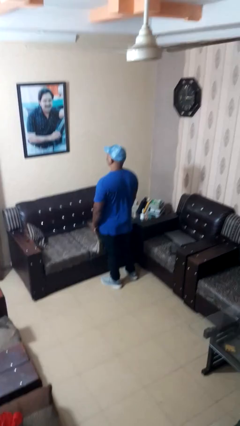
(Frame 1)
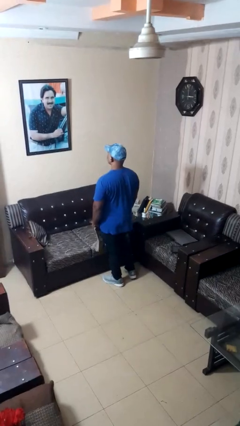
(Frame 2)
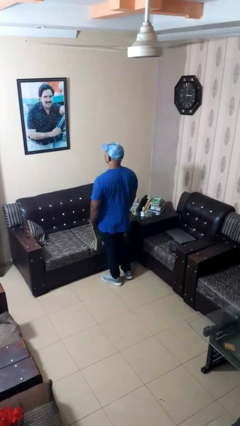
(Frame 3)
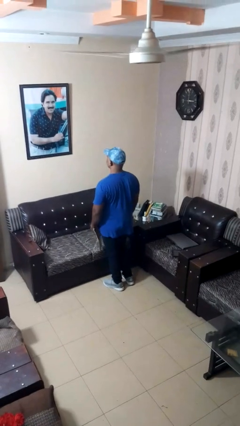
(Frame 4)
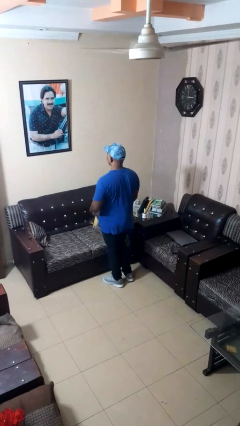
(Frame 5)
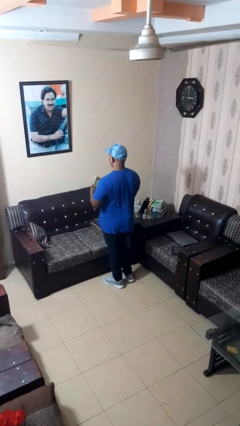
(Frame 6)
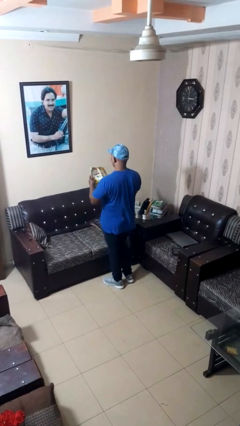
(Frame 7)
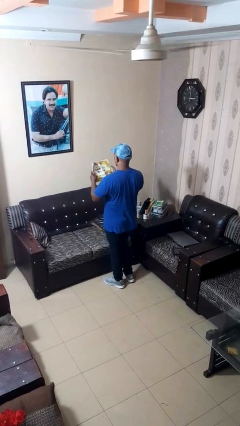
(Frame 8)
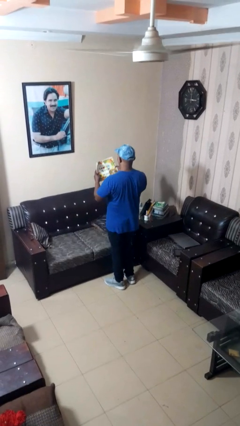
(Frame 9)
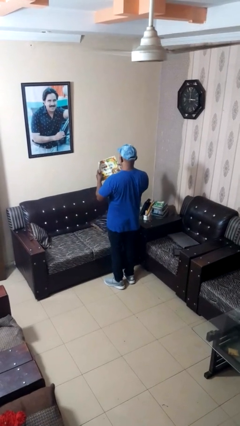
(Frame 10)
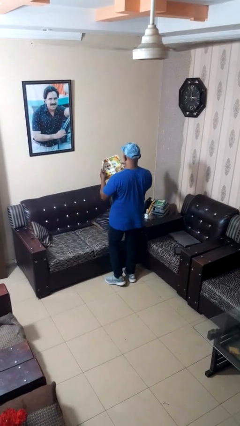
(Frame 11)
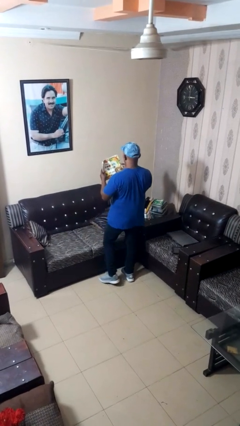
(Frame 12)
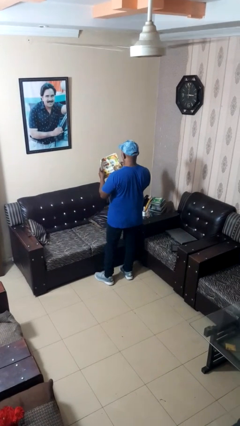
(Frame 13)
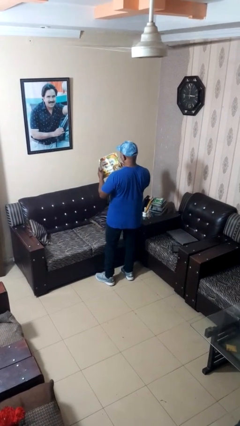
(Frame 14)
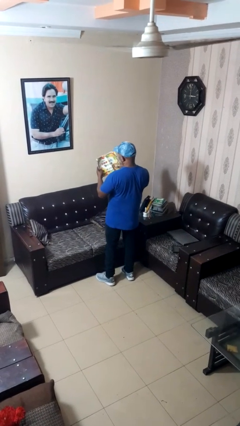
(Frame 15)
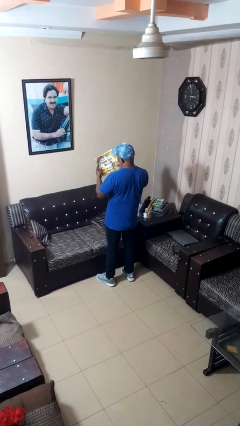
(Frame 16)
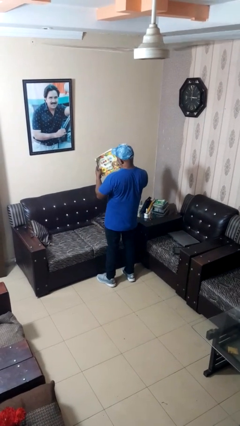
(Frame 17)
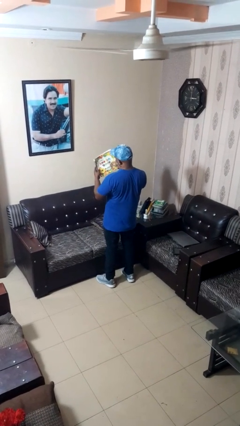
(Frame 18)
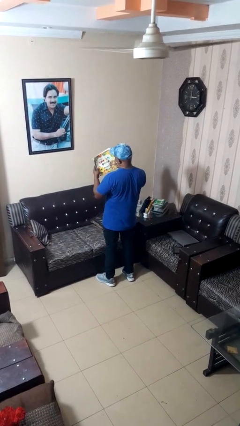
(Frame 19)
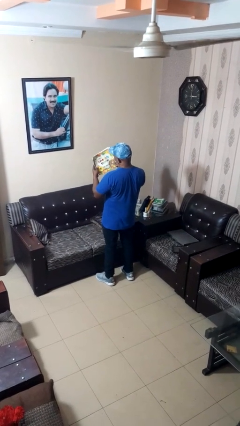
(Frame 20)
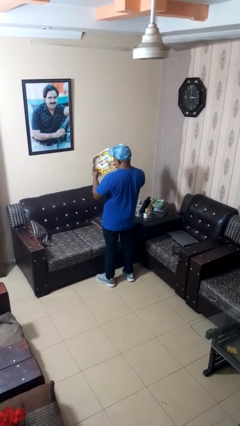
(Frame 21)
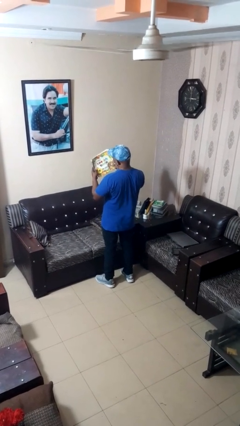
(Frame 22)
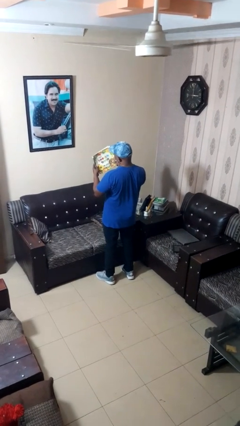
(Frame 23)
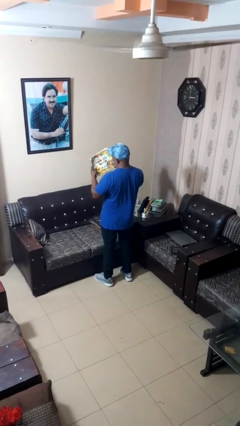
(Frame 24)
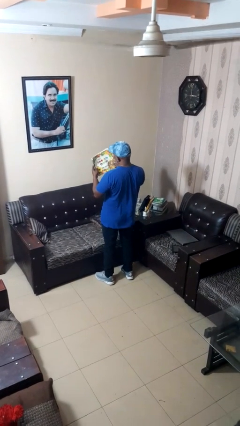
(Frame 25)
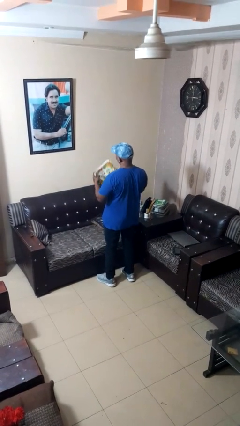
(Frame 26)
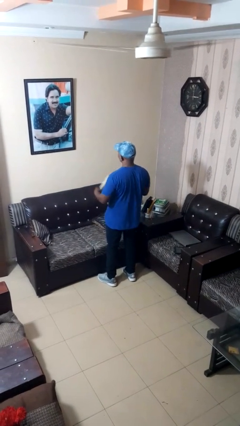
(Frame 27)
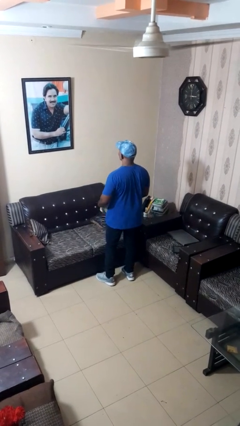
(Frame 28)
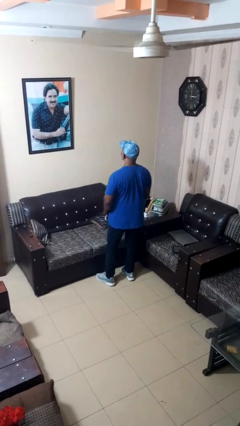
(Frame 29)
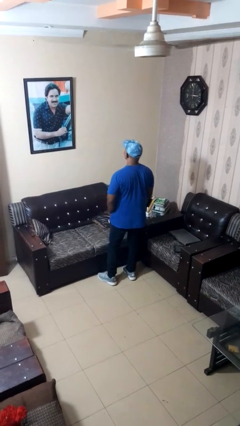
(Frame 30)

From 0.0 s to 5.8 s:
person reads magazine

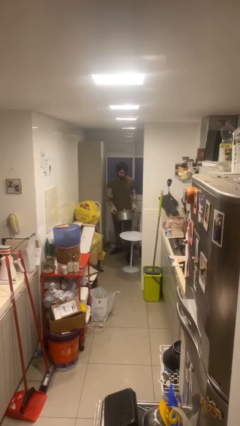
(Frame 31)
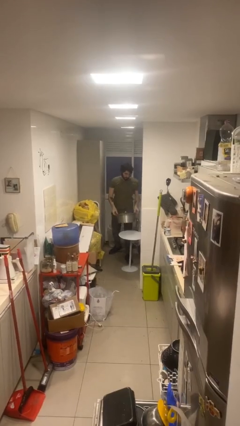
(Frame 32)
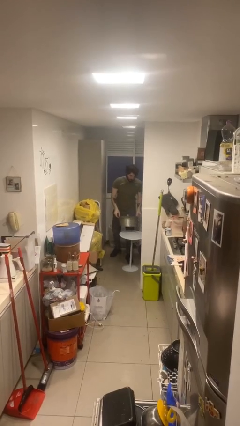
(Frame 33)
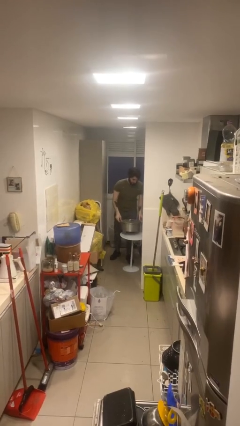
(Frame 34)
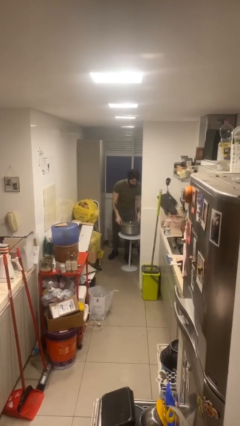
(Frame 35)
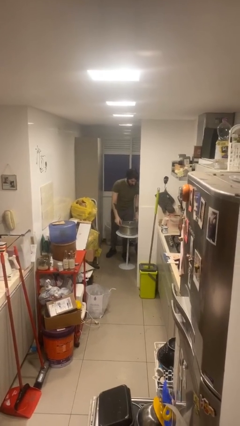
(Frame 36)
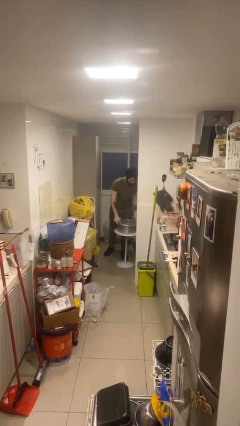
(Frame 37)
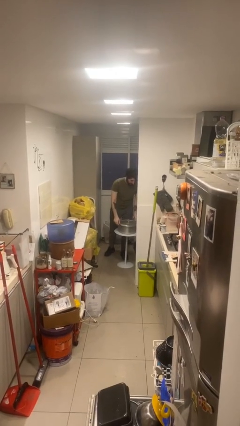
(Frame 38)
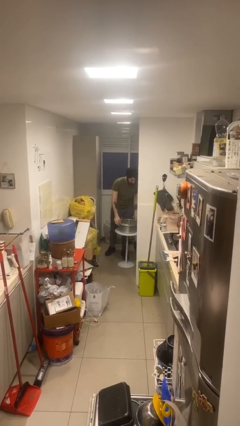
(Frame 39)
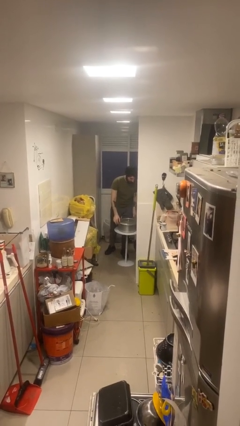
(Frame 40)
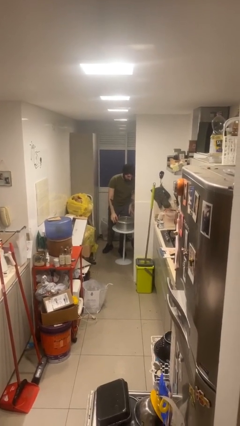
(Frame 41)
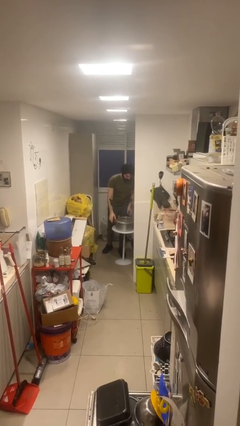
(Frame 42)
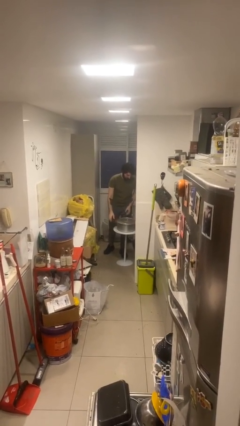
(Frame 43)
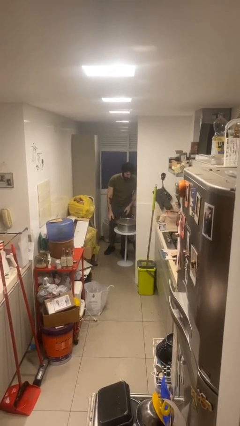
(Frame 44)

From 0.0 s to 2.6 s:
person puts down object on table

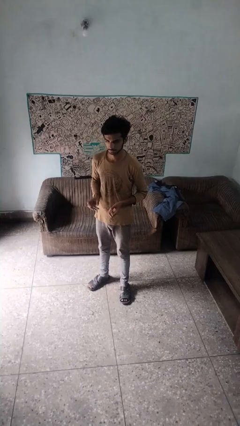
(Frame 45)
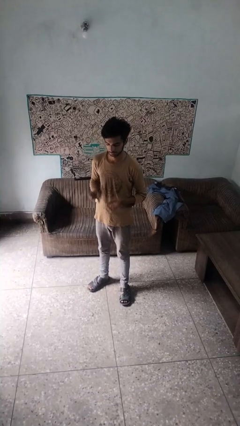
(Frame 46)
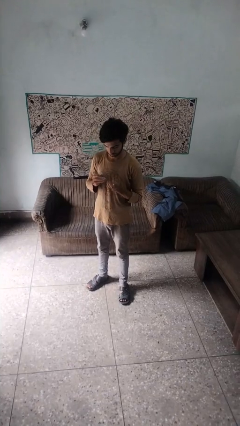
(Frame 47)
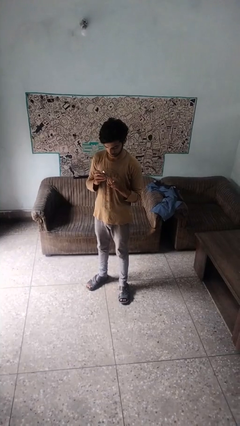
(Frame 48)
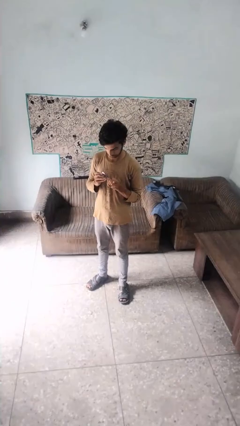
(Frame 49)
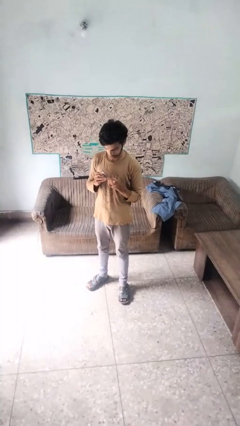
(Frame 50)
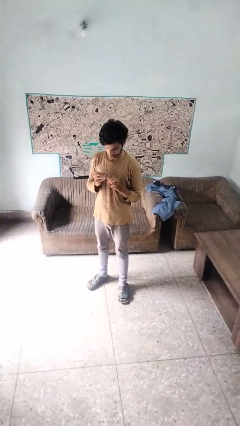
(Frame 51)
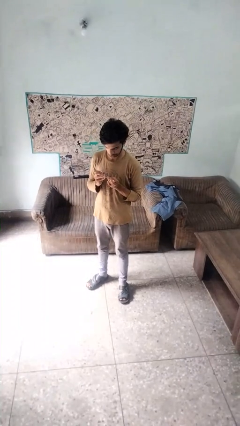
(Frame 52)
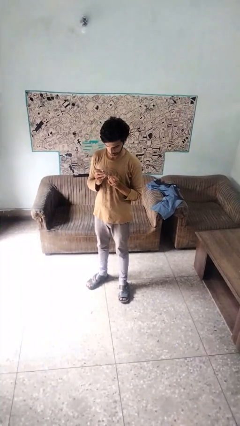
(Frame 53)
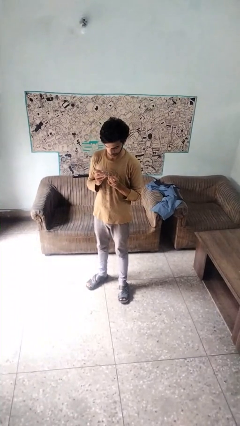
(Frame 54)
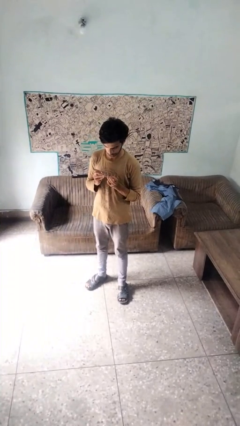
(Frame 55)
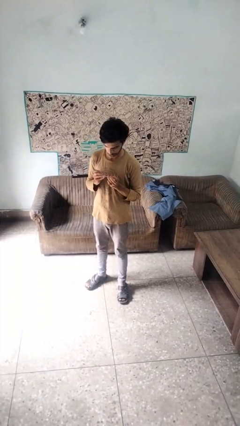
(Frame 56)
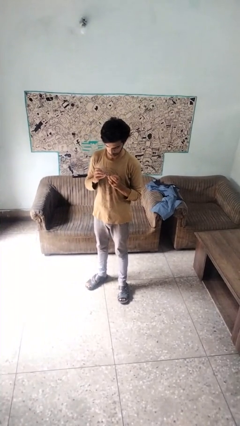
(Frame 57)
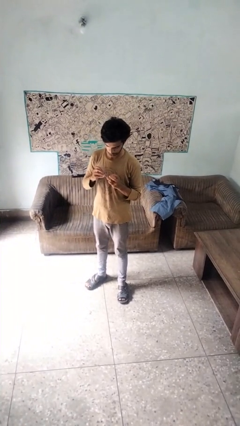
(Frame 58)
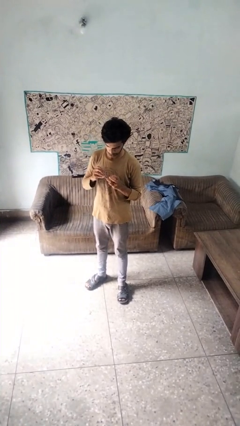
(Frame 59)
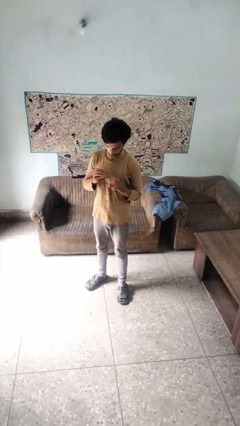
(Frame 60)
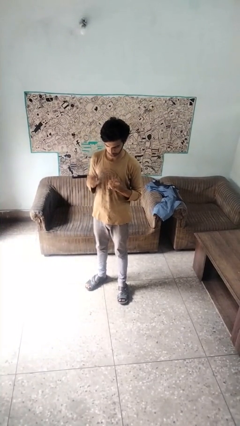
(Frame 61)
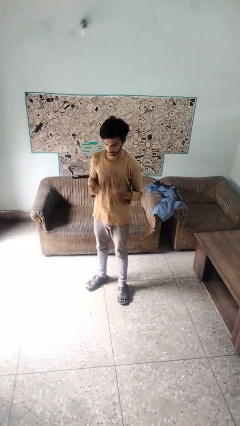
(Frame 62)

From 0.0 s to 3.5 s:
person clips fingernails

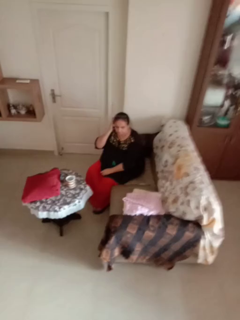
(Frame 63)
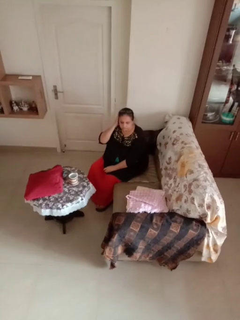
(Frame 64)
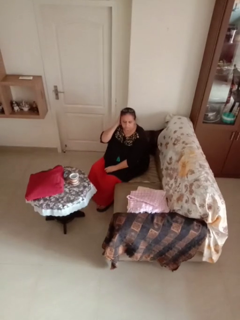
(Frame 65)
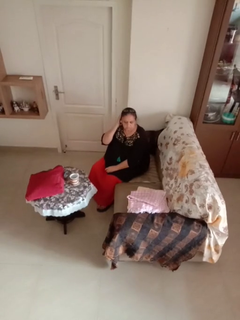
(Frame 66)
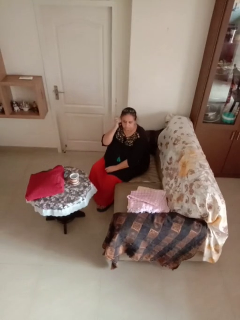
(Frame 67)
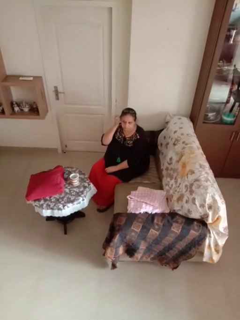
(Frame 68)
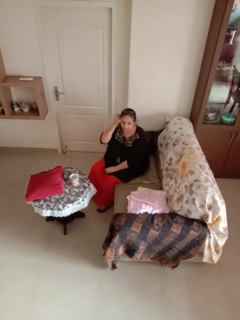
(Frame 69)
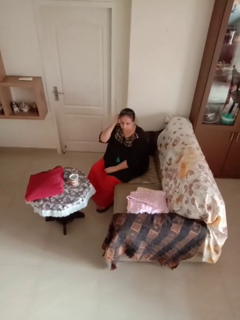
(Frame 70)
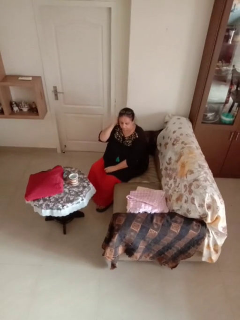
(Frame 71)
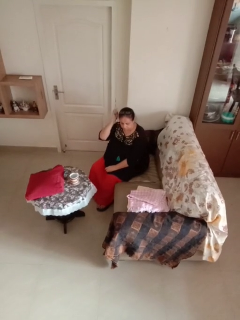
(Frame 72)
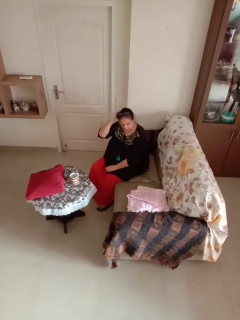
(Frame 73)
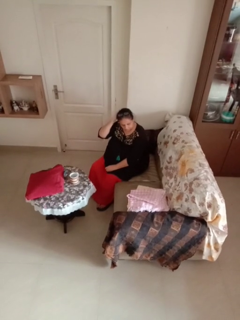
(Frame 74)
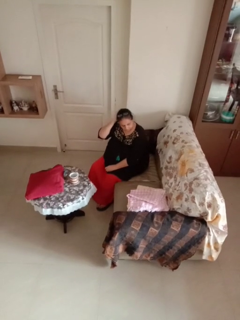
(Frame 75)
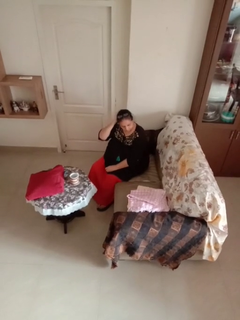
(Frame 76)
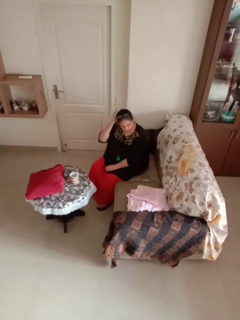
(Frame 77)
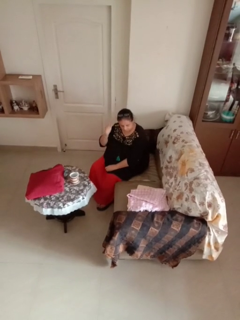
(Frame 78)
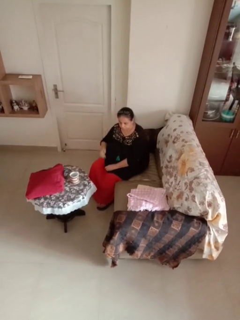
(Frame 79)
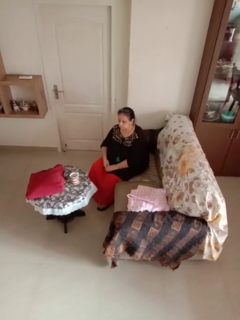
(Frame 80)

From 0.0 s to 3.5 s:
person strokes hair

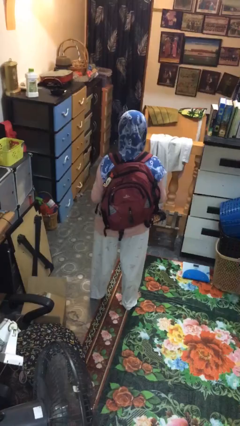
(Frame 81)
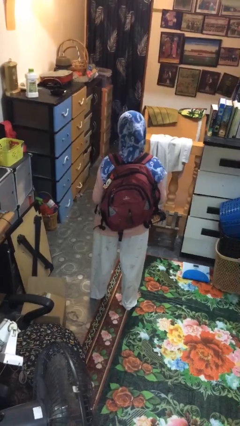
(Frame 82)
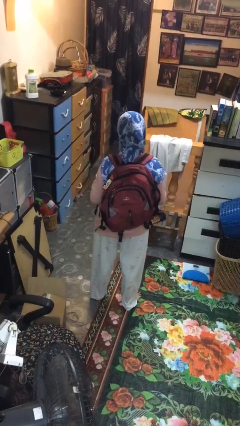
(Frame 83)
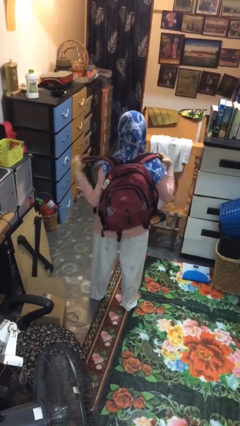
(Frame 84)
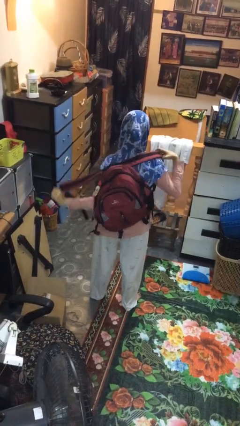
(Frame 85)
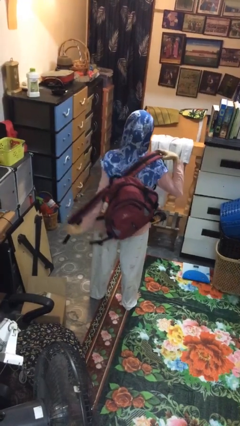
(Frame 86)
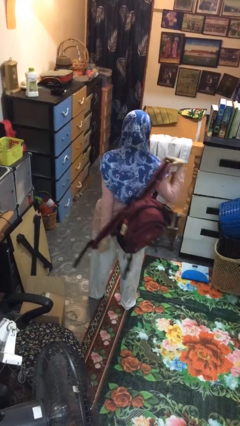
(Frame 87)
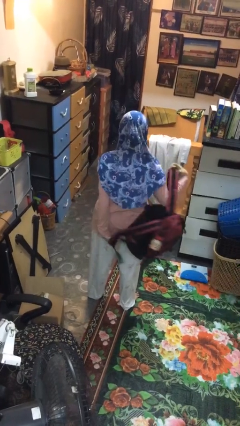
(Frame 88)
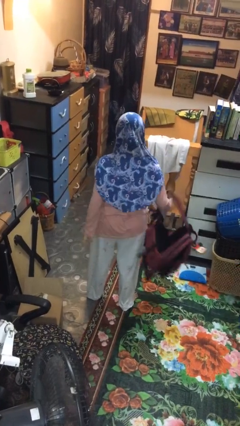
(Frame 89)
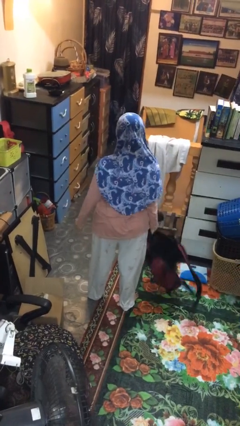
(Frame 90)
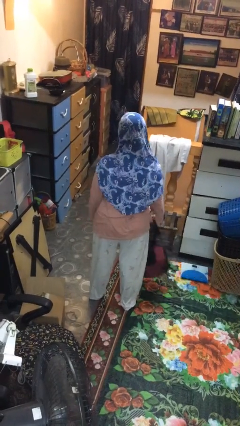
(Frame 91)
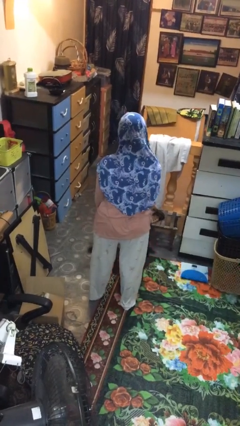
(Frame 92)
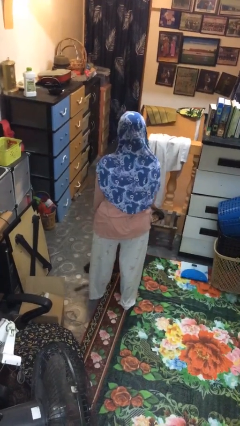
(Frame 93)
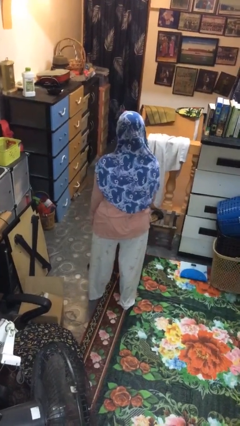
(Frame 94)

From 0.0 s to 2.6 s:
person takes off backpack

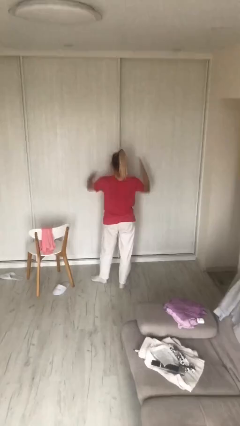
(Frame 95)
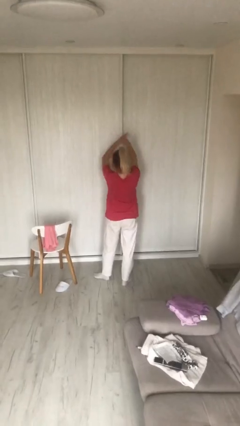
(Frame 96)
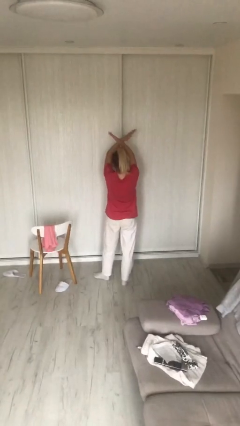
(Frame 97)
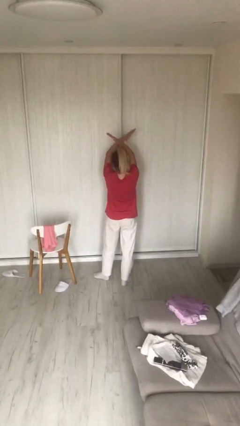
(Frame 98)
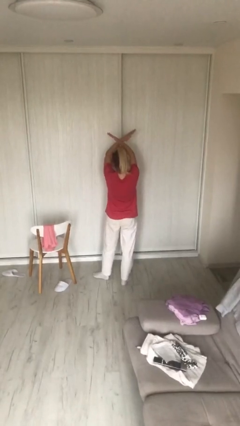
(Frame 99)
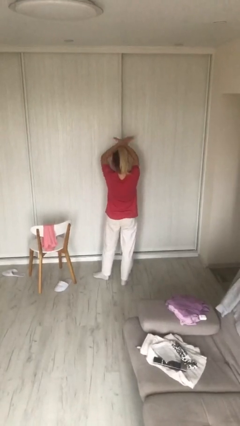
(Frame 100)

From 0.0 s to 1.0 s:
person gestures arms x
